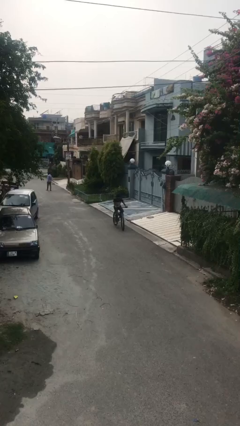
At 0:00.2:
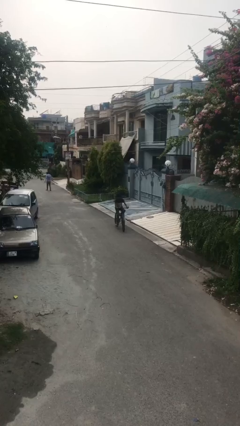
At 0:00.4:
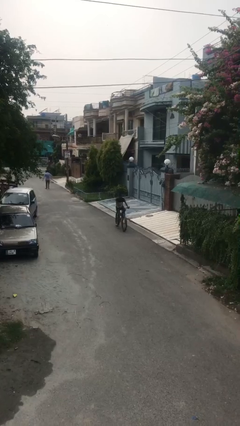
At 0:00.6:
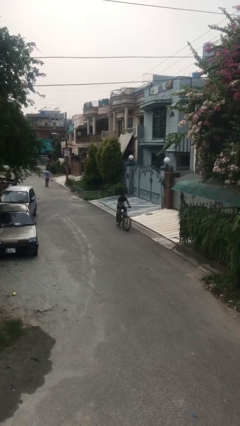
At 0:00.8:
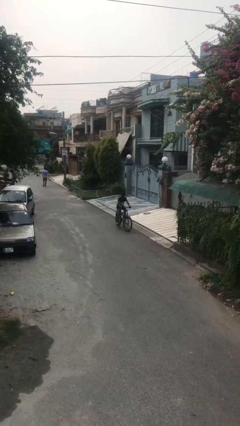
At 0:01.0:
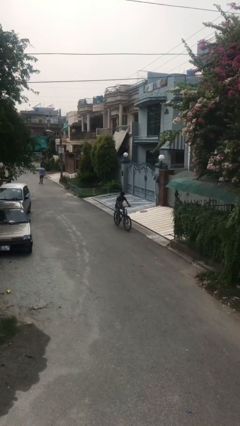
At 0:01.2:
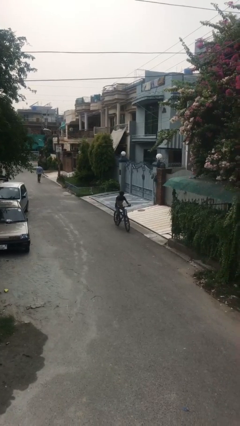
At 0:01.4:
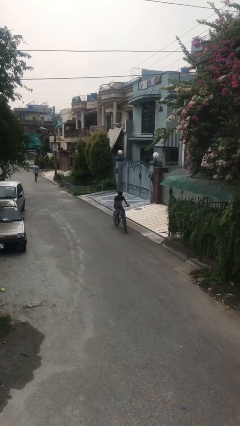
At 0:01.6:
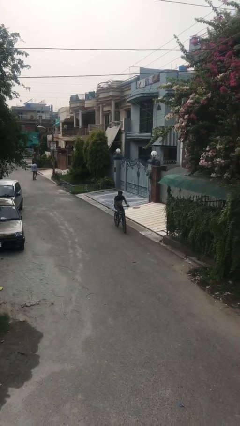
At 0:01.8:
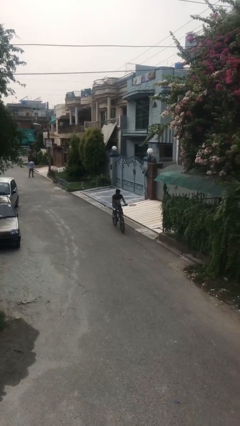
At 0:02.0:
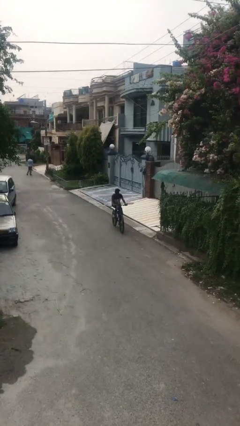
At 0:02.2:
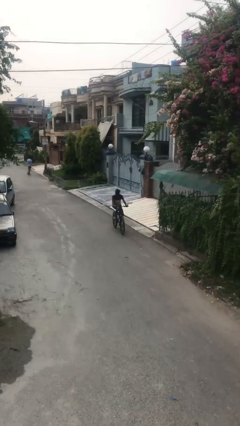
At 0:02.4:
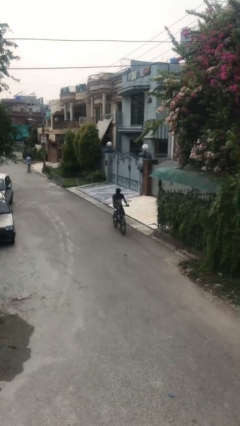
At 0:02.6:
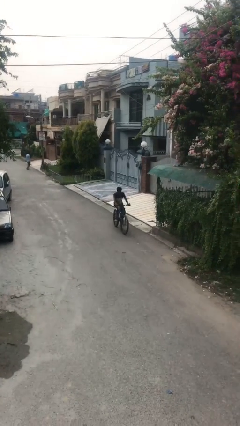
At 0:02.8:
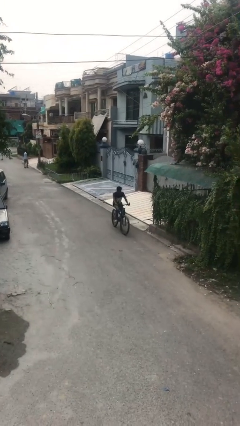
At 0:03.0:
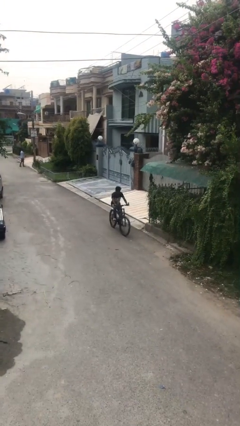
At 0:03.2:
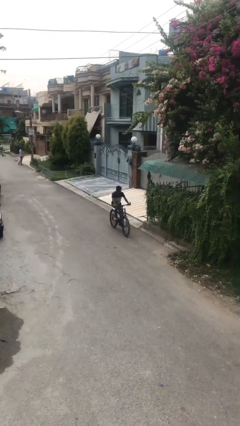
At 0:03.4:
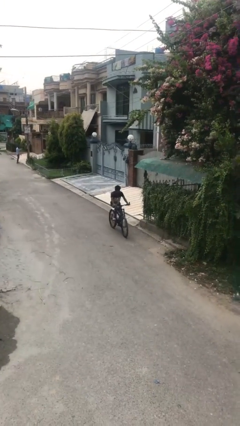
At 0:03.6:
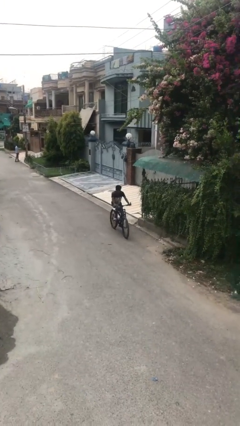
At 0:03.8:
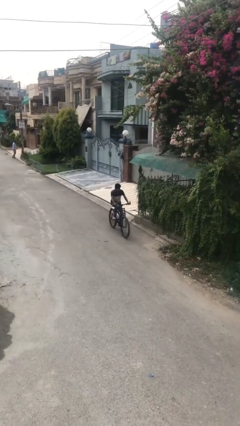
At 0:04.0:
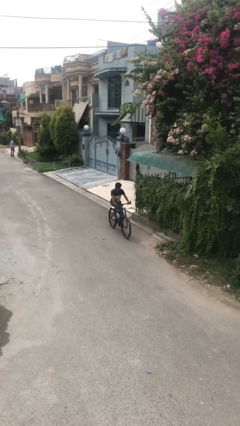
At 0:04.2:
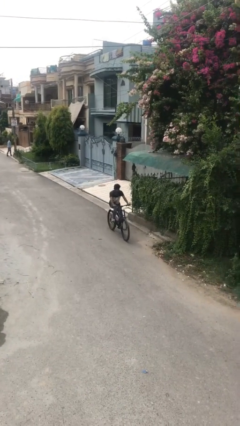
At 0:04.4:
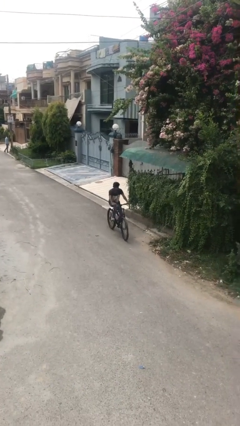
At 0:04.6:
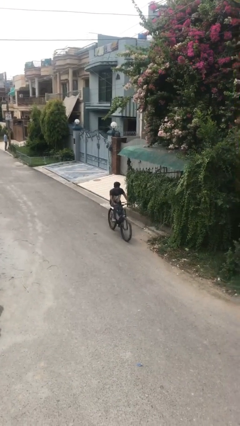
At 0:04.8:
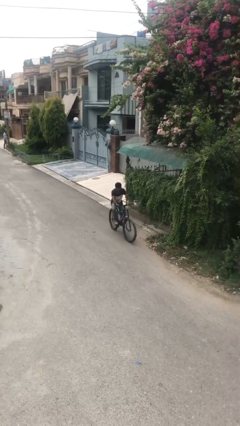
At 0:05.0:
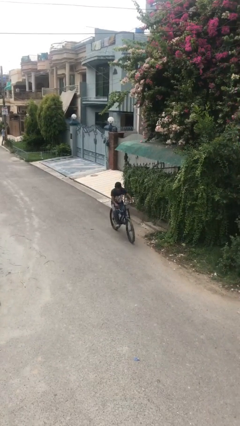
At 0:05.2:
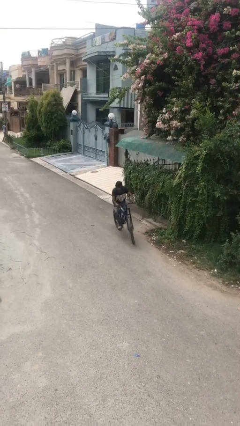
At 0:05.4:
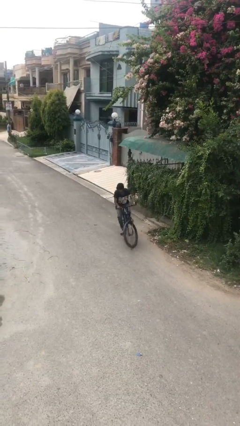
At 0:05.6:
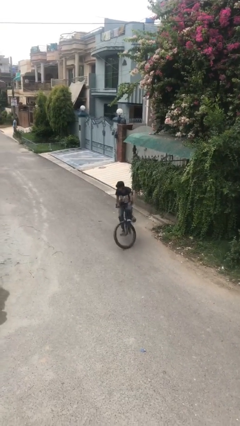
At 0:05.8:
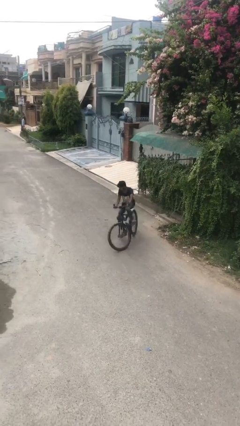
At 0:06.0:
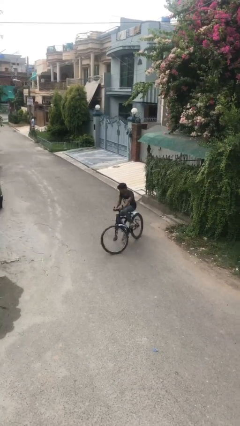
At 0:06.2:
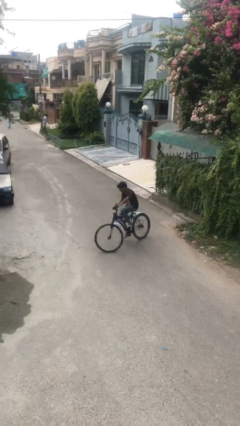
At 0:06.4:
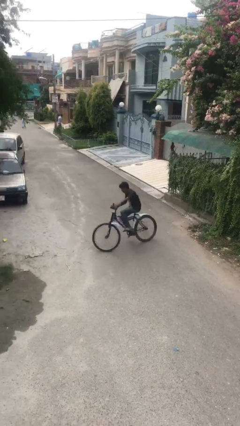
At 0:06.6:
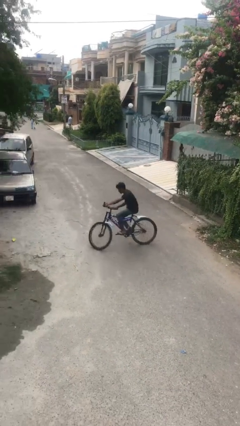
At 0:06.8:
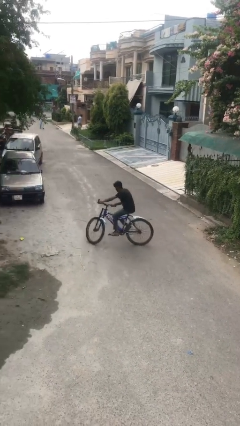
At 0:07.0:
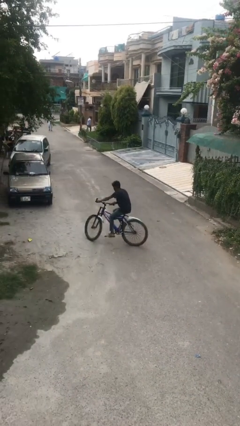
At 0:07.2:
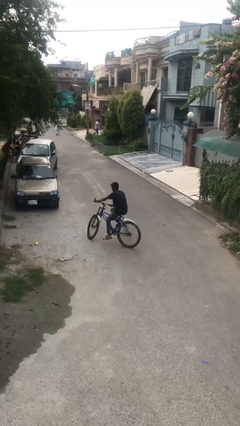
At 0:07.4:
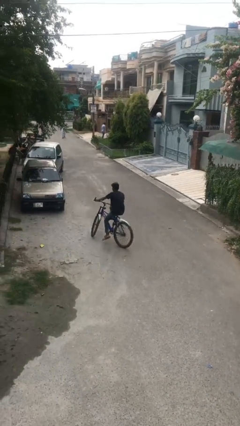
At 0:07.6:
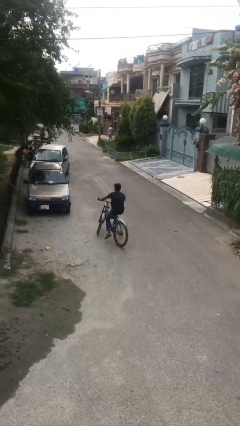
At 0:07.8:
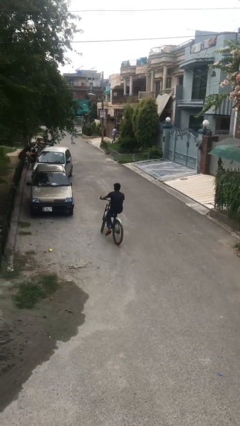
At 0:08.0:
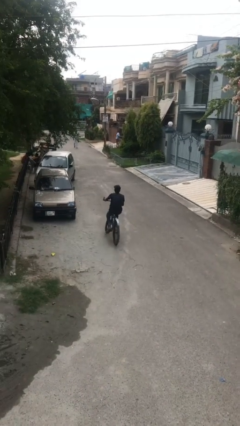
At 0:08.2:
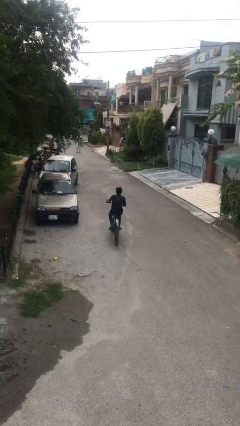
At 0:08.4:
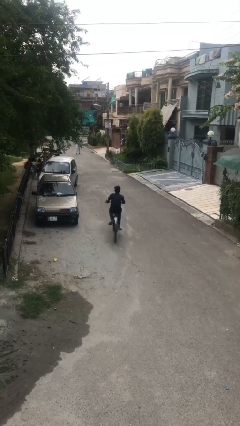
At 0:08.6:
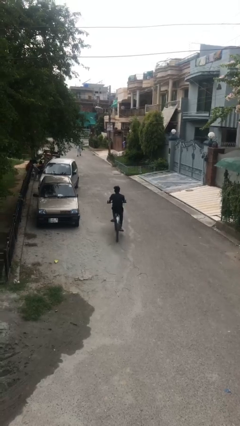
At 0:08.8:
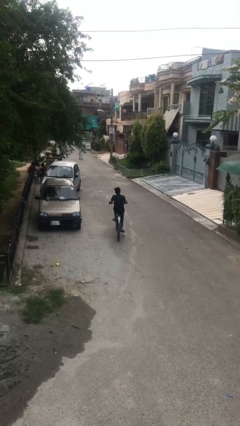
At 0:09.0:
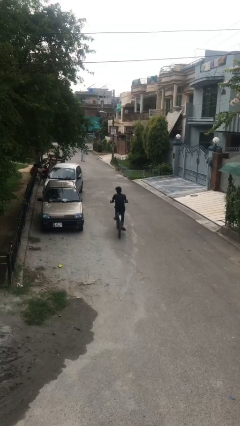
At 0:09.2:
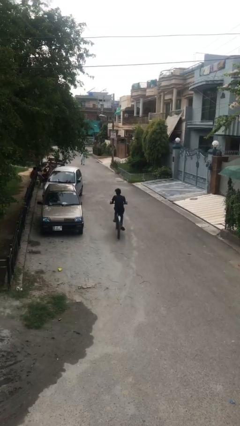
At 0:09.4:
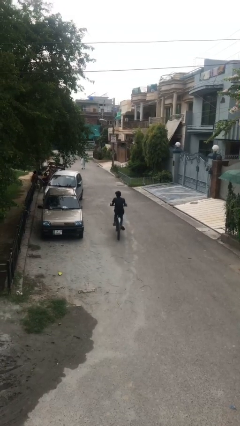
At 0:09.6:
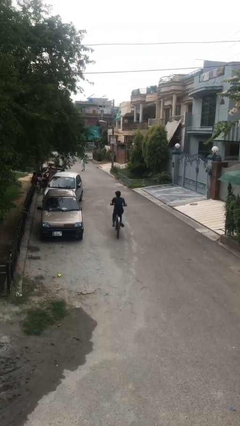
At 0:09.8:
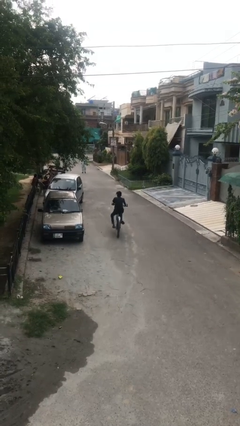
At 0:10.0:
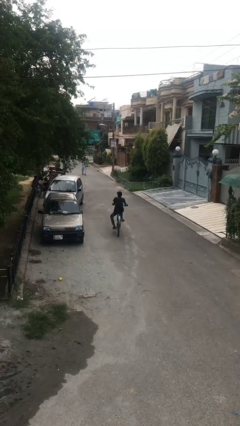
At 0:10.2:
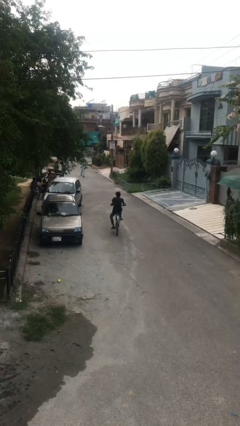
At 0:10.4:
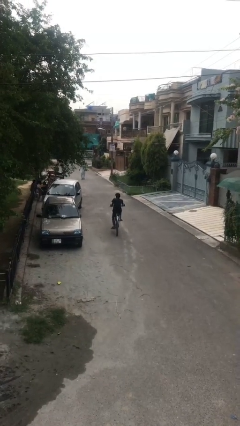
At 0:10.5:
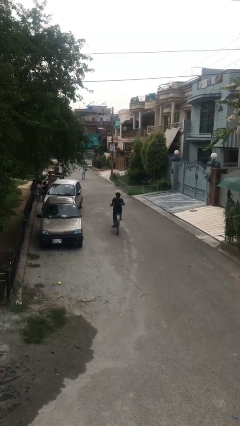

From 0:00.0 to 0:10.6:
person rides bicycle

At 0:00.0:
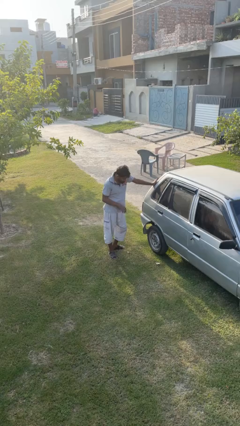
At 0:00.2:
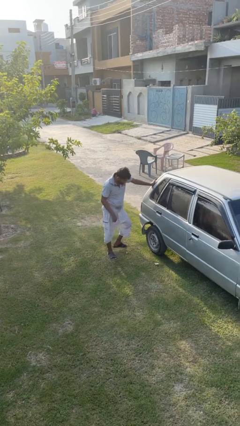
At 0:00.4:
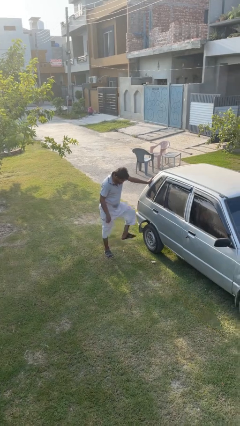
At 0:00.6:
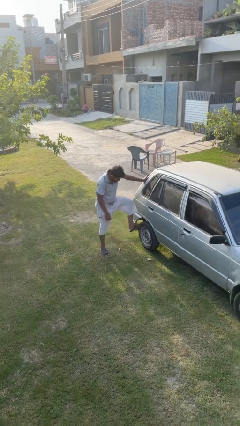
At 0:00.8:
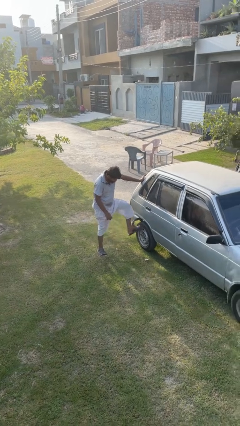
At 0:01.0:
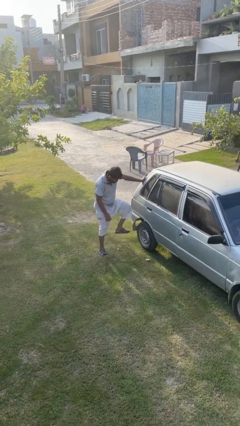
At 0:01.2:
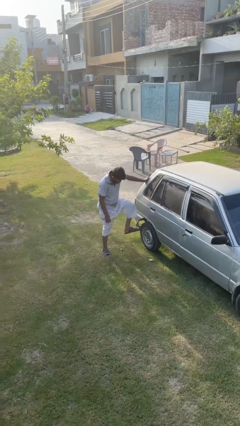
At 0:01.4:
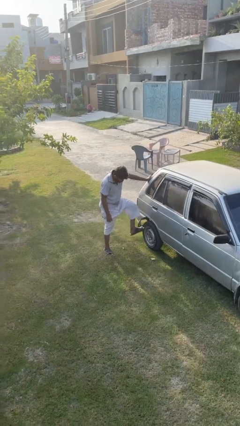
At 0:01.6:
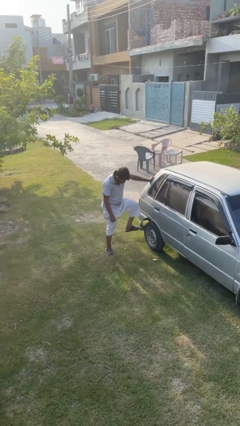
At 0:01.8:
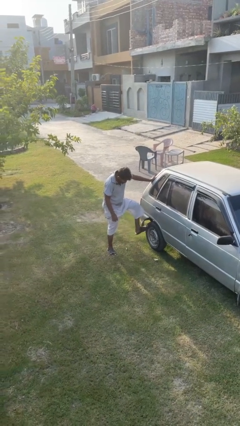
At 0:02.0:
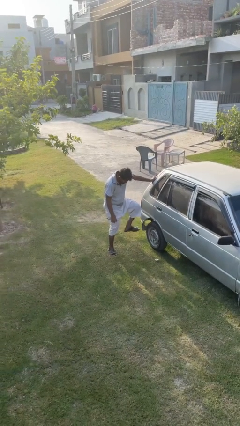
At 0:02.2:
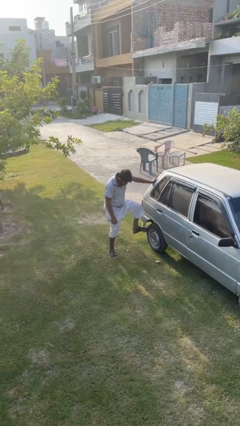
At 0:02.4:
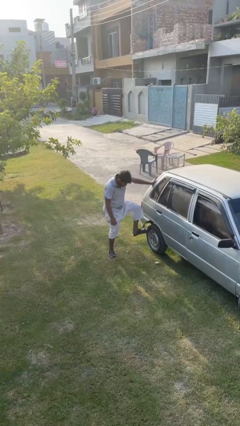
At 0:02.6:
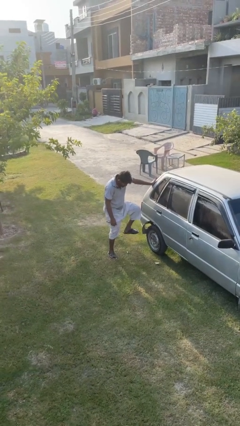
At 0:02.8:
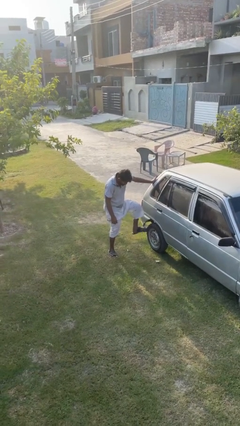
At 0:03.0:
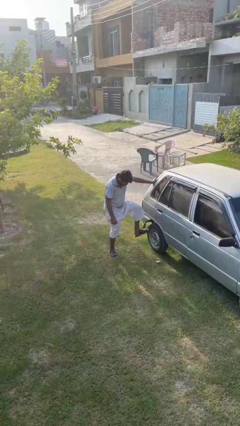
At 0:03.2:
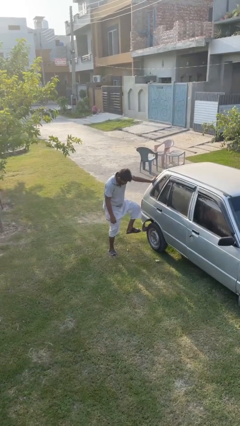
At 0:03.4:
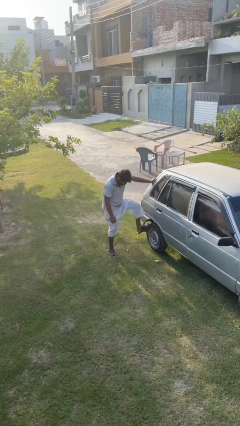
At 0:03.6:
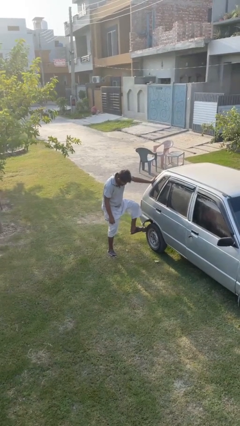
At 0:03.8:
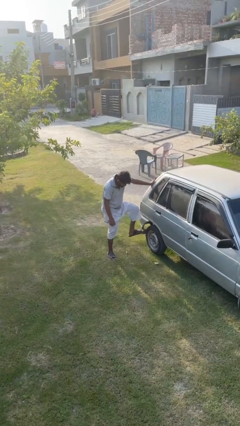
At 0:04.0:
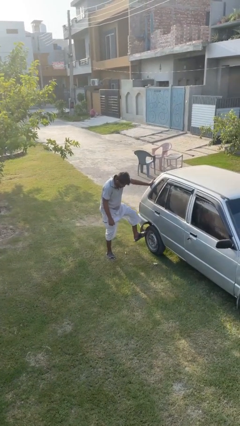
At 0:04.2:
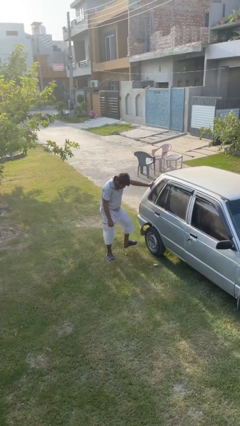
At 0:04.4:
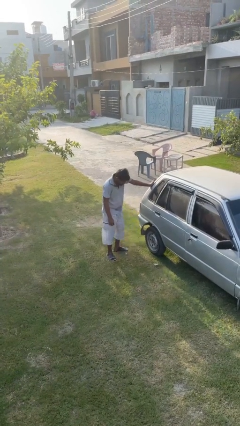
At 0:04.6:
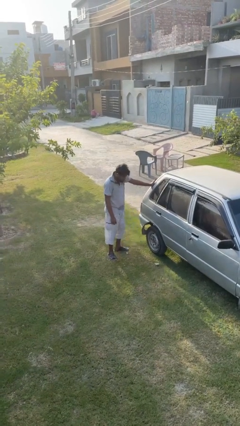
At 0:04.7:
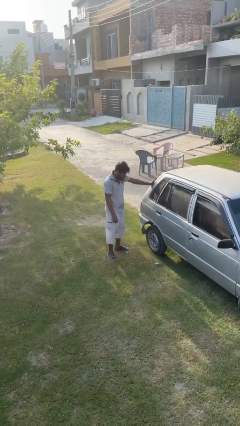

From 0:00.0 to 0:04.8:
person kicks car tires

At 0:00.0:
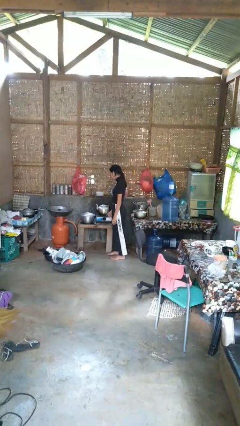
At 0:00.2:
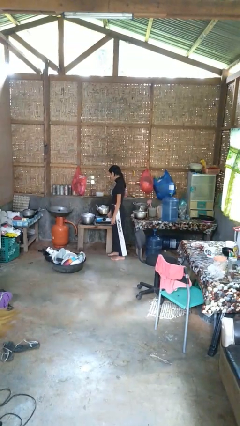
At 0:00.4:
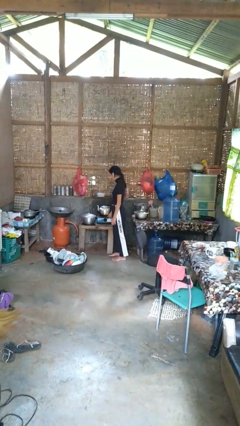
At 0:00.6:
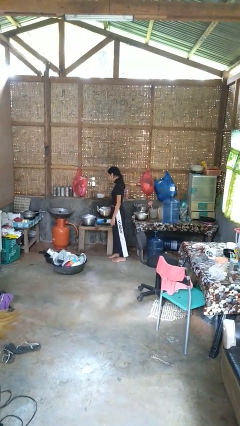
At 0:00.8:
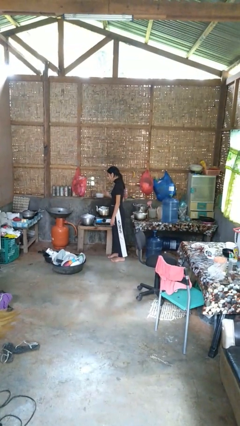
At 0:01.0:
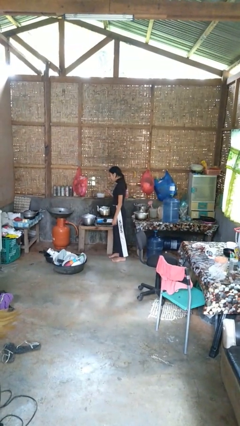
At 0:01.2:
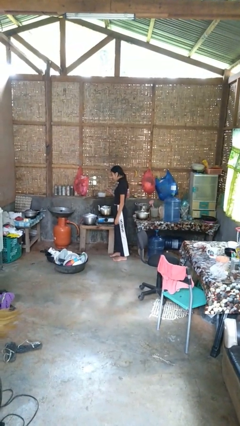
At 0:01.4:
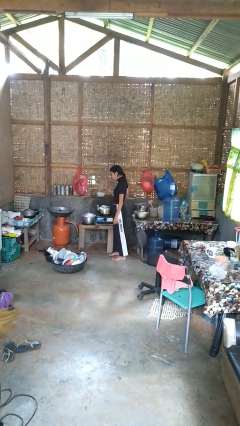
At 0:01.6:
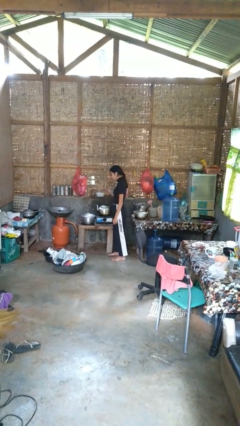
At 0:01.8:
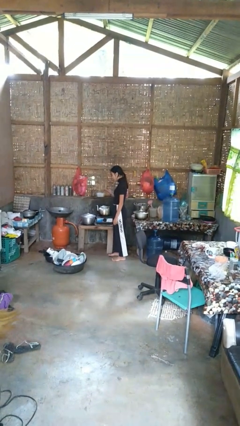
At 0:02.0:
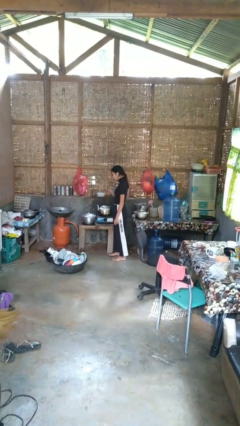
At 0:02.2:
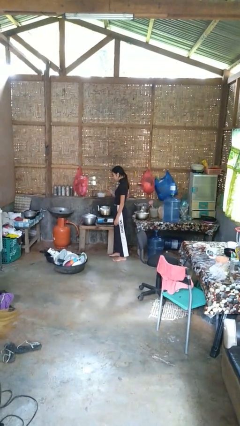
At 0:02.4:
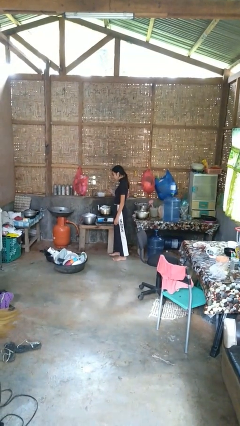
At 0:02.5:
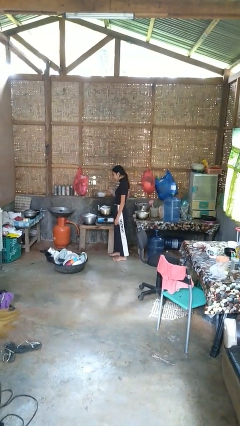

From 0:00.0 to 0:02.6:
person burns hand
